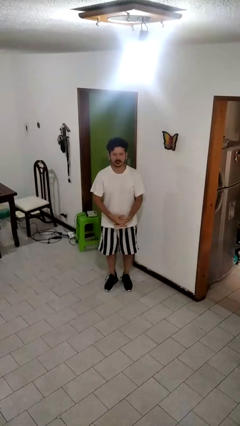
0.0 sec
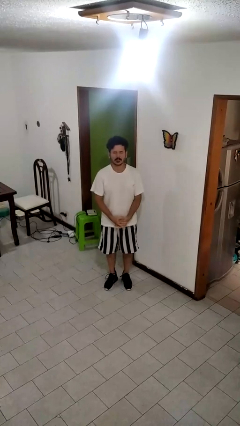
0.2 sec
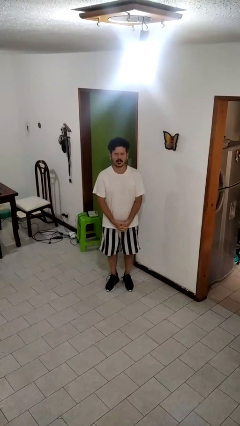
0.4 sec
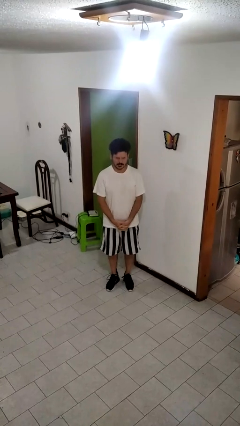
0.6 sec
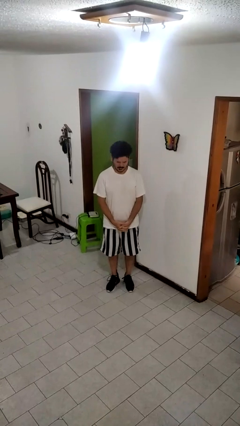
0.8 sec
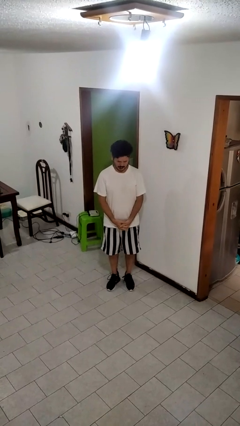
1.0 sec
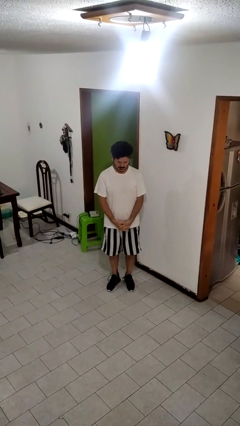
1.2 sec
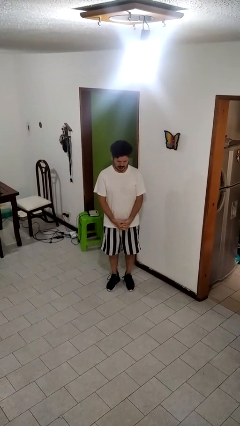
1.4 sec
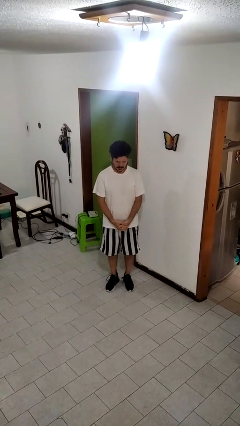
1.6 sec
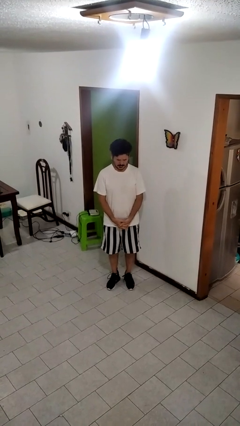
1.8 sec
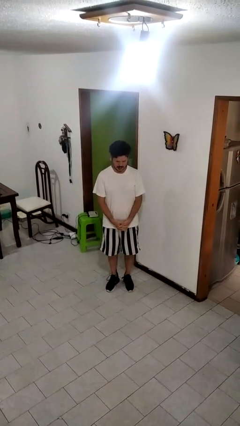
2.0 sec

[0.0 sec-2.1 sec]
person prays

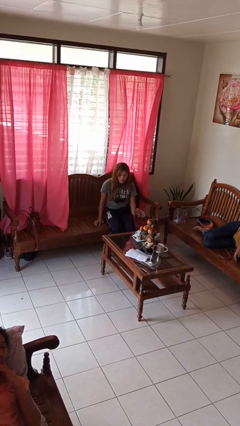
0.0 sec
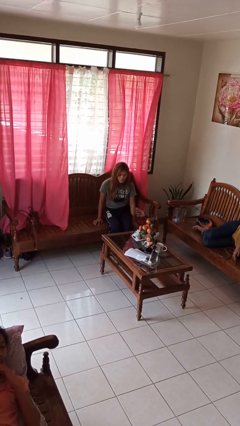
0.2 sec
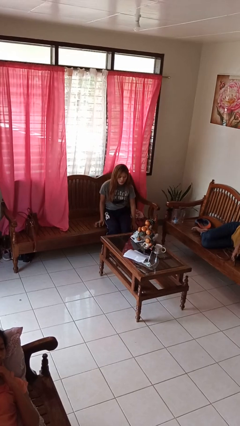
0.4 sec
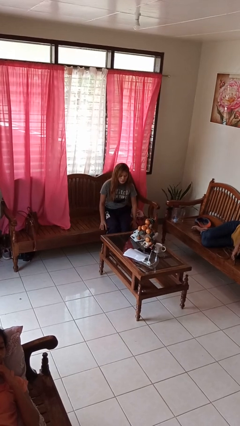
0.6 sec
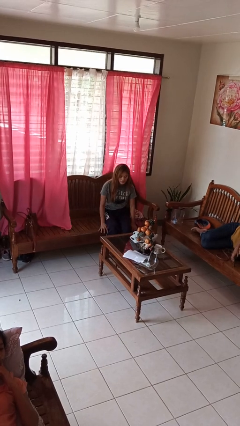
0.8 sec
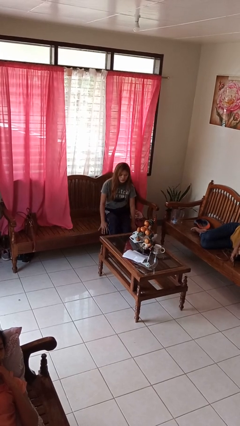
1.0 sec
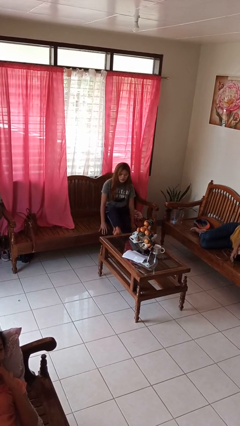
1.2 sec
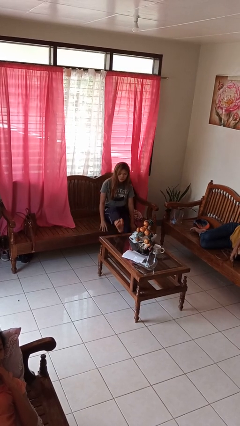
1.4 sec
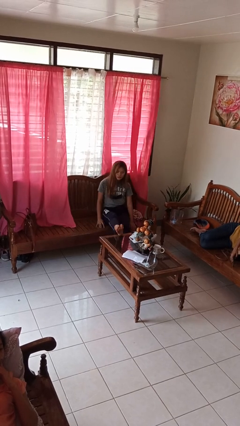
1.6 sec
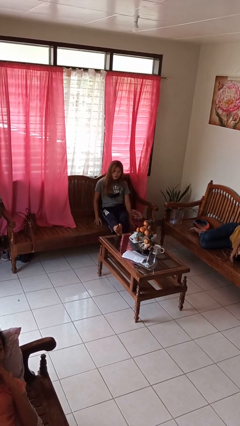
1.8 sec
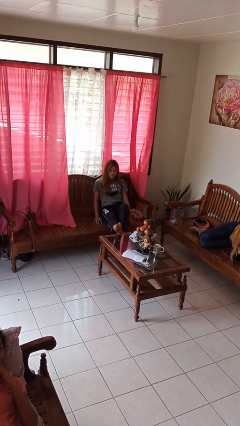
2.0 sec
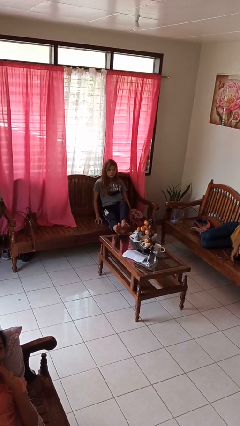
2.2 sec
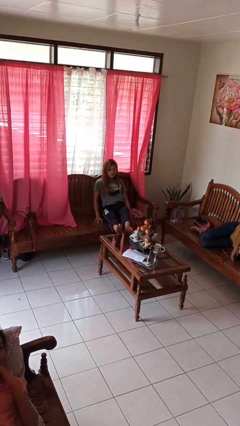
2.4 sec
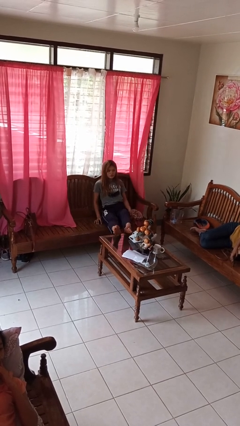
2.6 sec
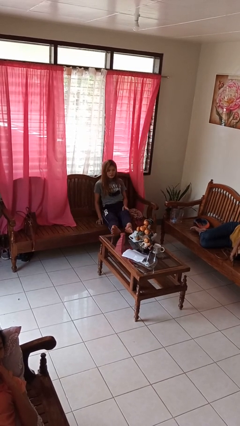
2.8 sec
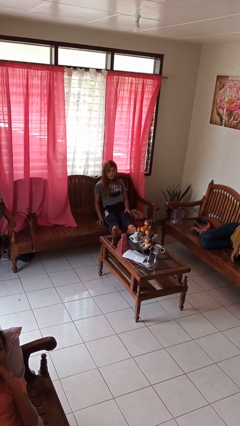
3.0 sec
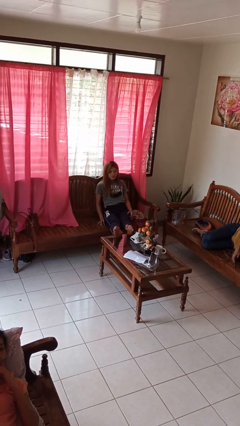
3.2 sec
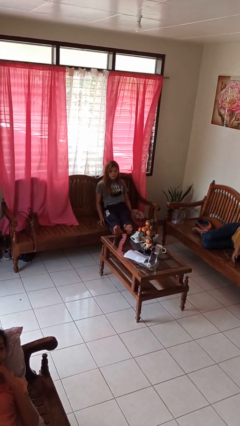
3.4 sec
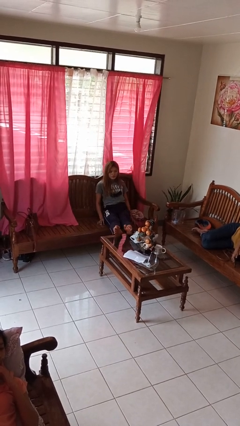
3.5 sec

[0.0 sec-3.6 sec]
person puts feet up

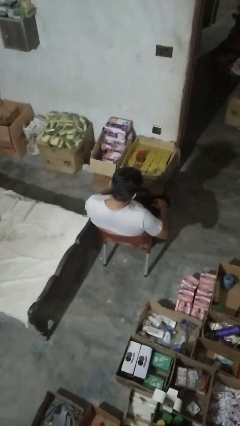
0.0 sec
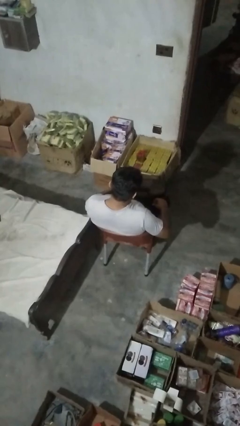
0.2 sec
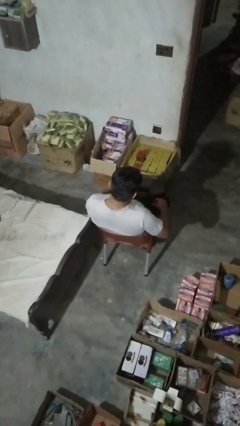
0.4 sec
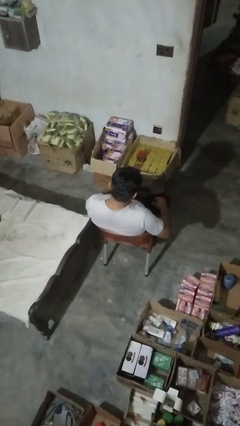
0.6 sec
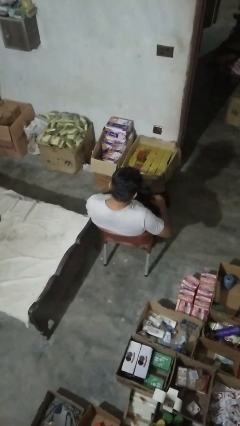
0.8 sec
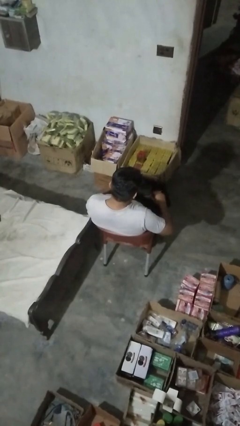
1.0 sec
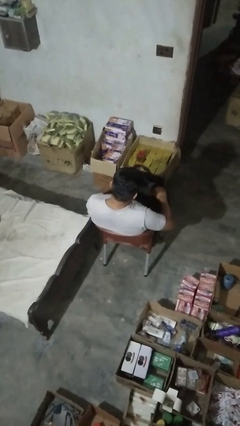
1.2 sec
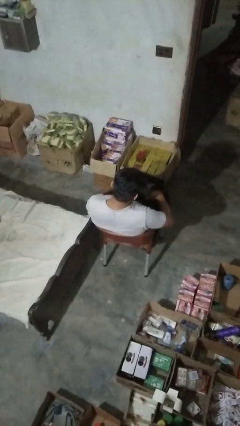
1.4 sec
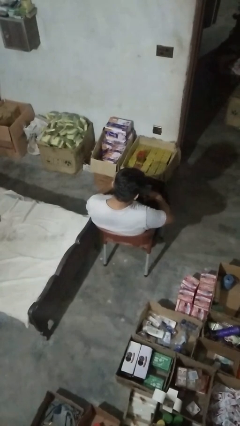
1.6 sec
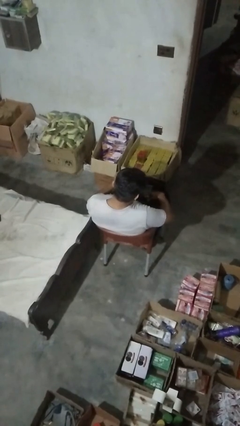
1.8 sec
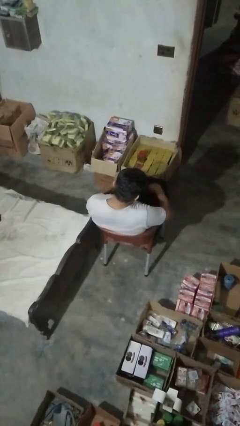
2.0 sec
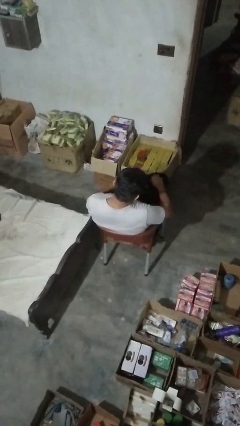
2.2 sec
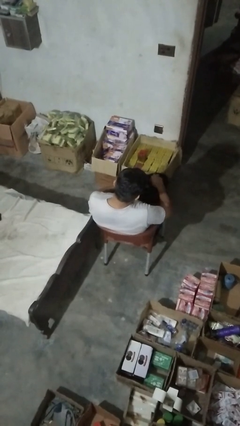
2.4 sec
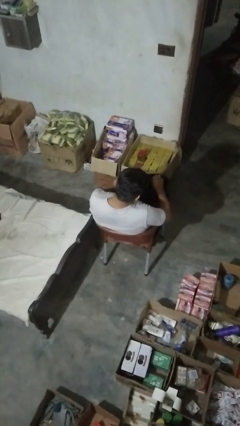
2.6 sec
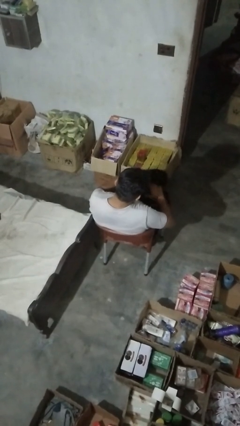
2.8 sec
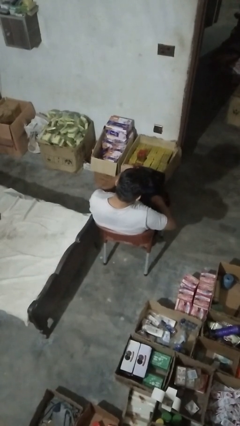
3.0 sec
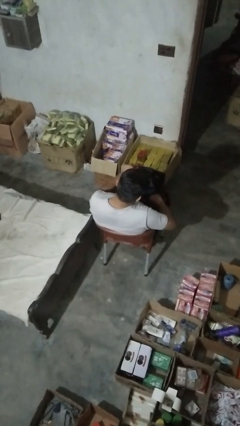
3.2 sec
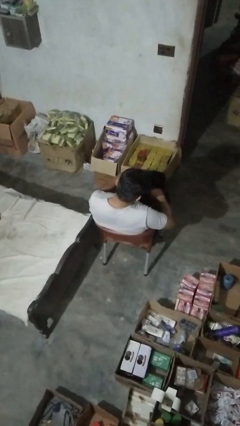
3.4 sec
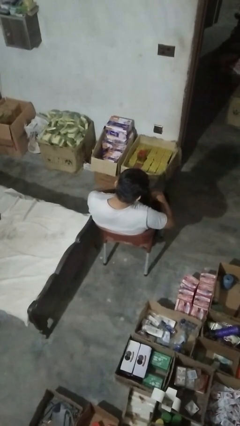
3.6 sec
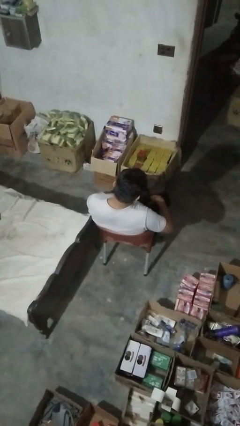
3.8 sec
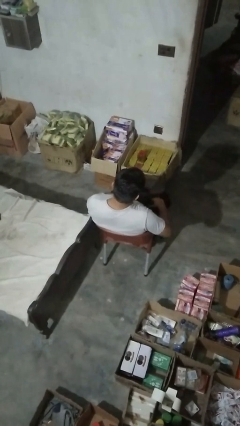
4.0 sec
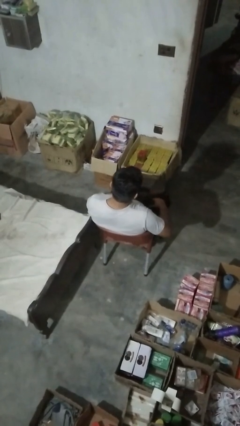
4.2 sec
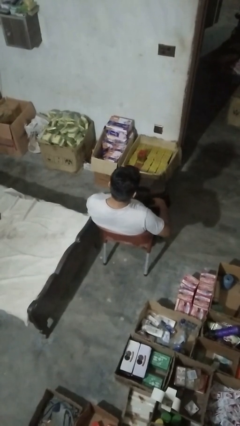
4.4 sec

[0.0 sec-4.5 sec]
person searches in bag

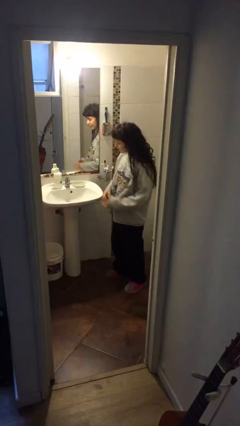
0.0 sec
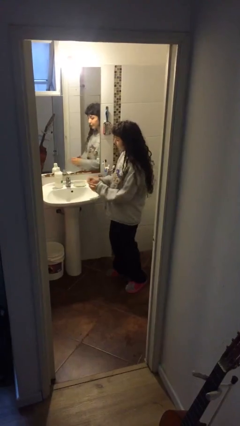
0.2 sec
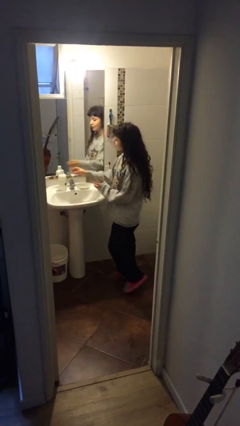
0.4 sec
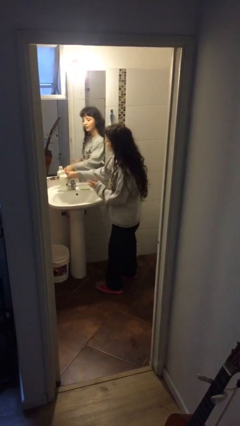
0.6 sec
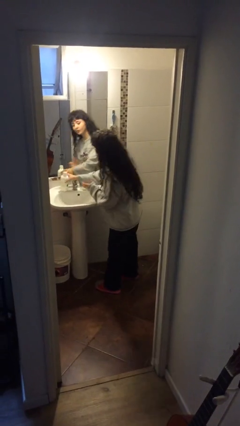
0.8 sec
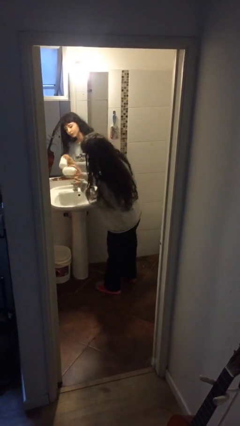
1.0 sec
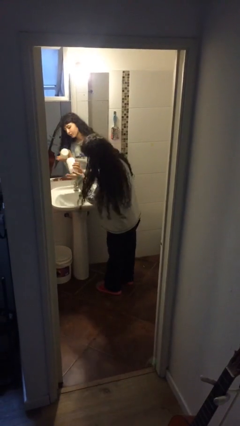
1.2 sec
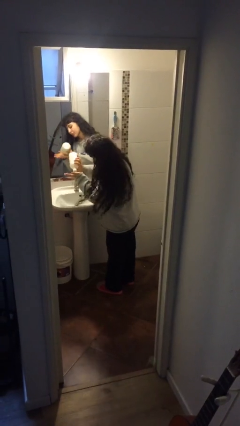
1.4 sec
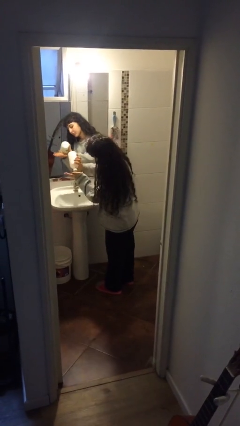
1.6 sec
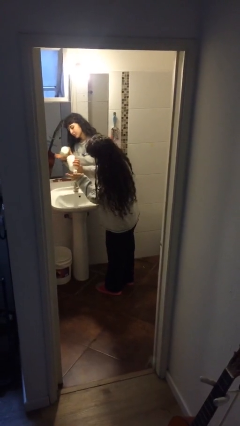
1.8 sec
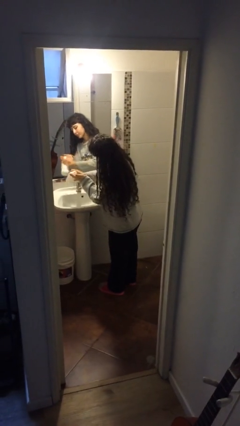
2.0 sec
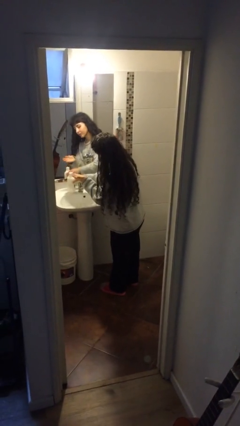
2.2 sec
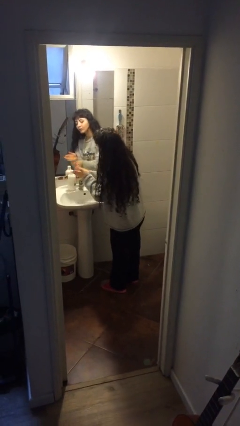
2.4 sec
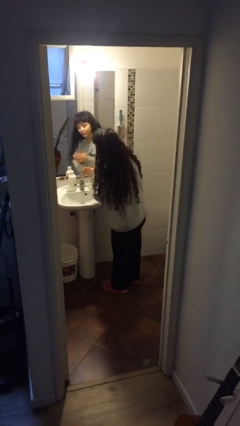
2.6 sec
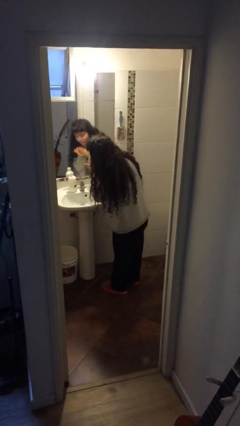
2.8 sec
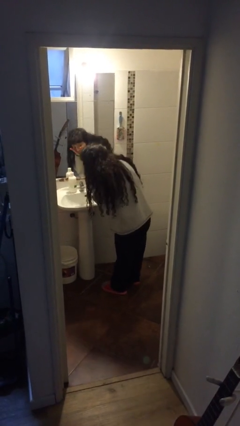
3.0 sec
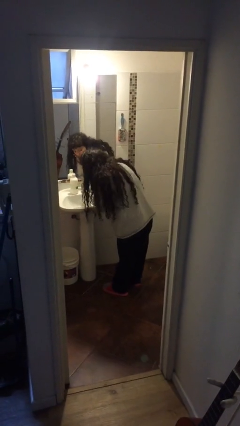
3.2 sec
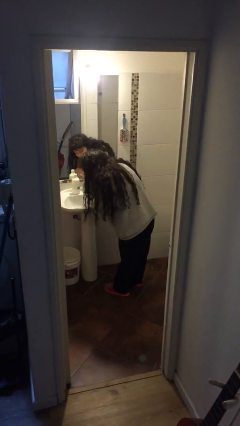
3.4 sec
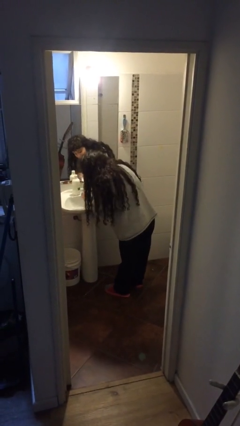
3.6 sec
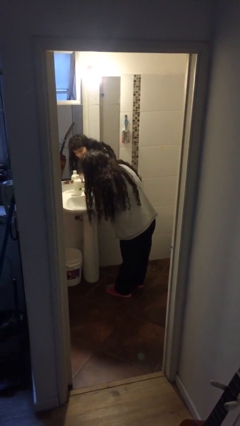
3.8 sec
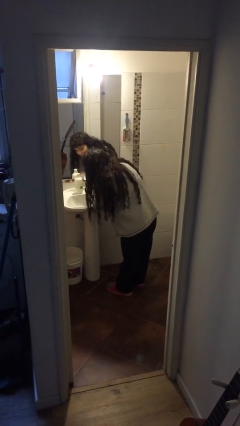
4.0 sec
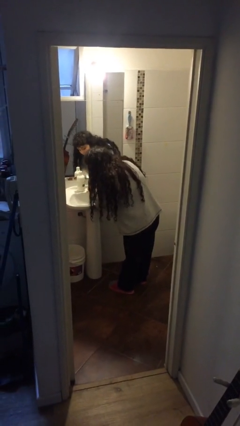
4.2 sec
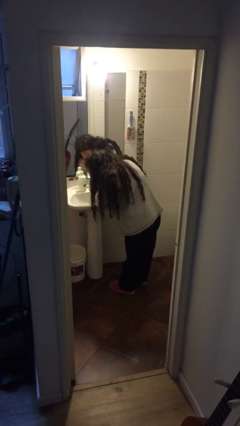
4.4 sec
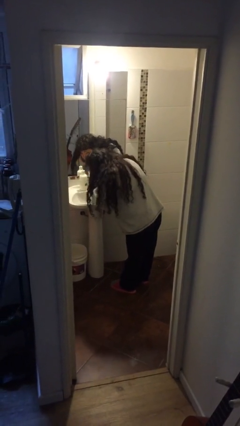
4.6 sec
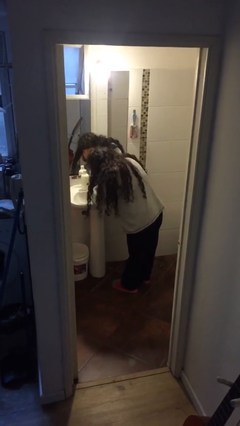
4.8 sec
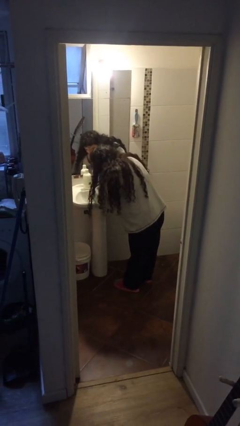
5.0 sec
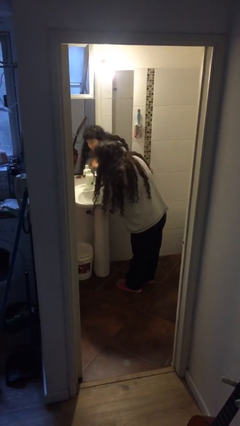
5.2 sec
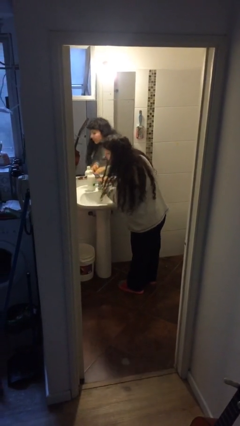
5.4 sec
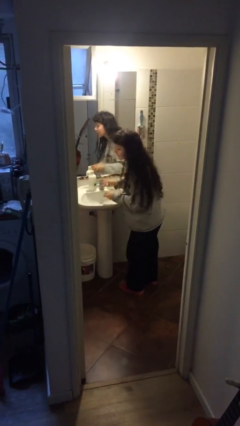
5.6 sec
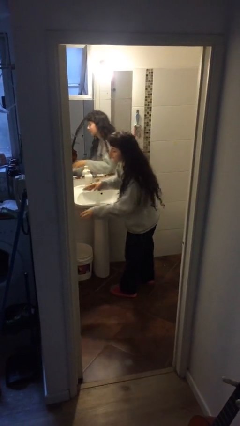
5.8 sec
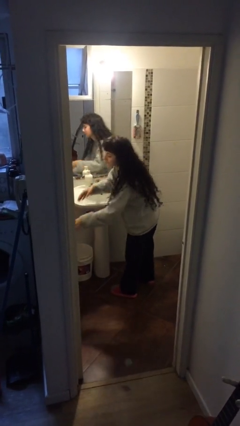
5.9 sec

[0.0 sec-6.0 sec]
person washes face

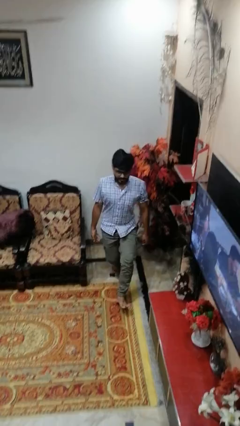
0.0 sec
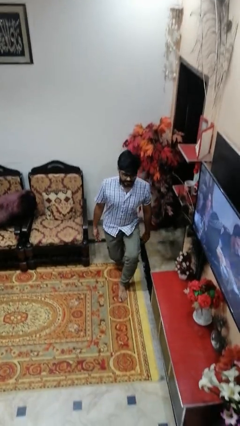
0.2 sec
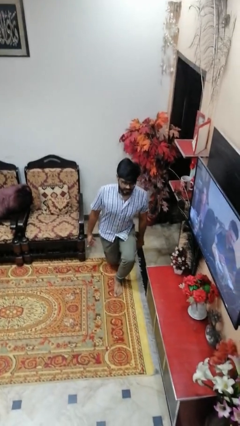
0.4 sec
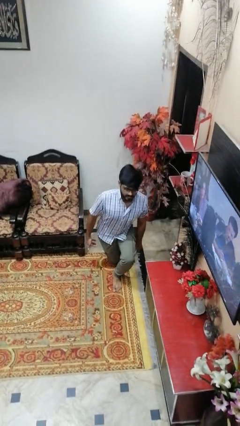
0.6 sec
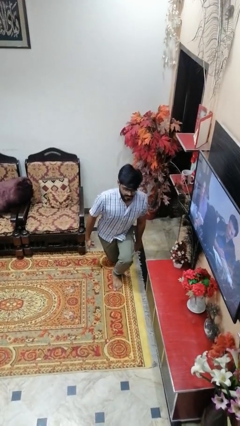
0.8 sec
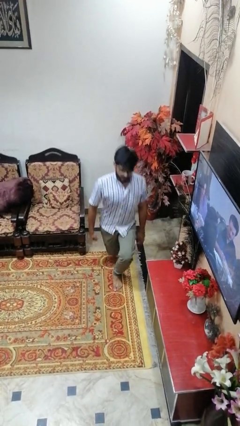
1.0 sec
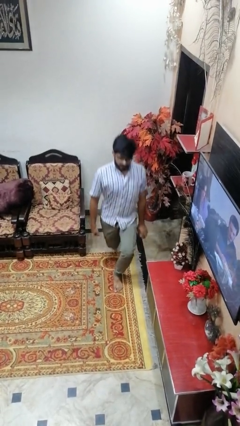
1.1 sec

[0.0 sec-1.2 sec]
person exercises with lunges

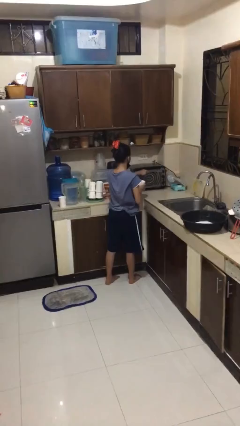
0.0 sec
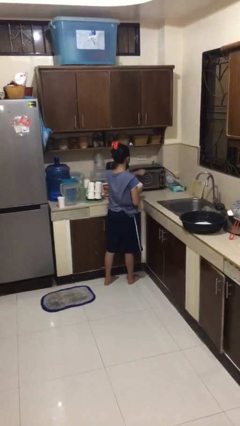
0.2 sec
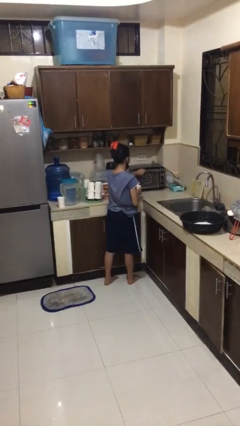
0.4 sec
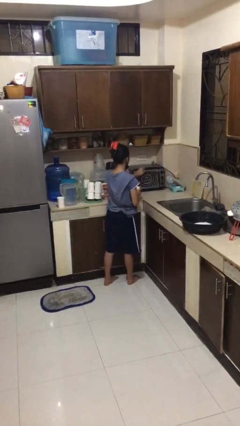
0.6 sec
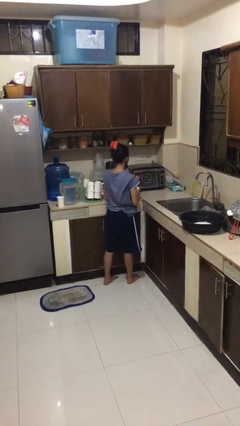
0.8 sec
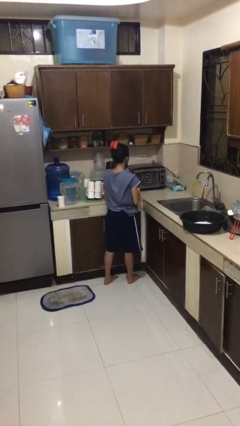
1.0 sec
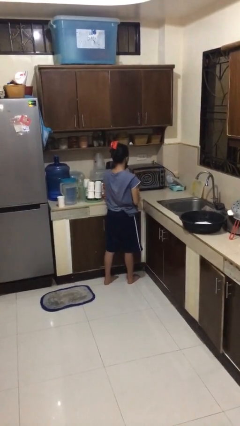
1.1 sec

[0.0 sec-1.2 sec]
person closes microwave
